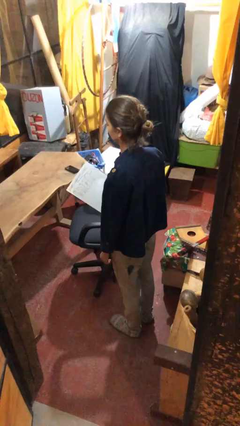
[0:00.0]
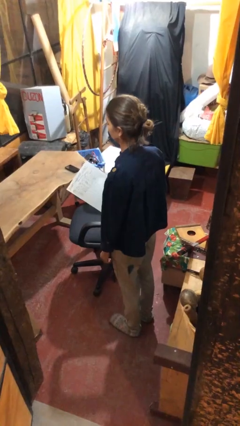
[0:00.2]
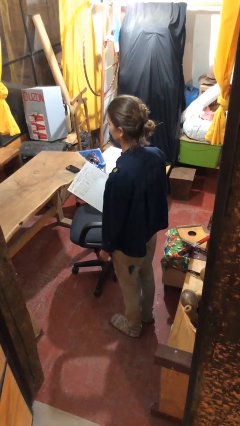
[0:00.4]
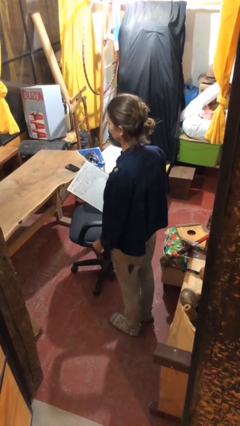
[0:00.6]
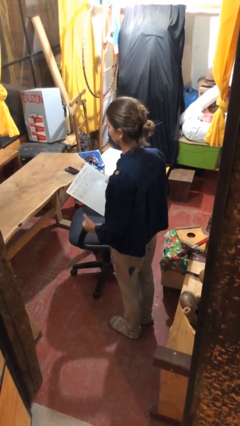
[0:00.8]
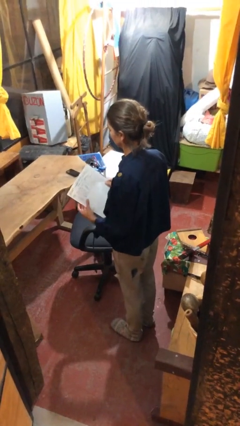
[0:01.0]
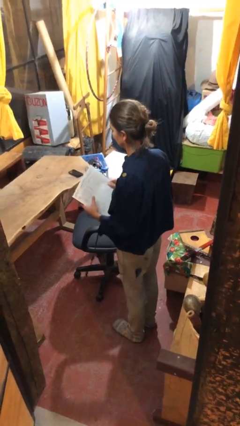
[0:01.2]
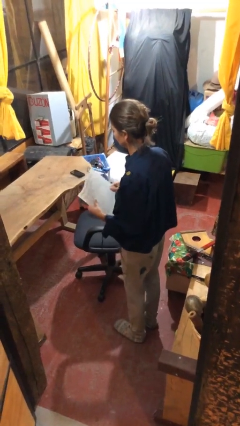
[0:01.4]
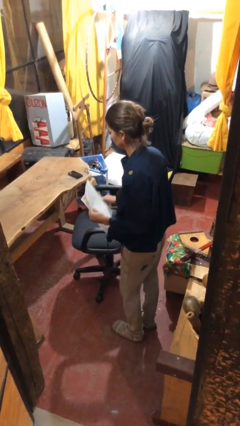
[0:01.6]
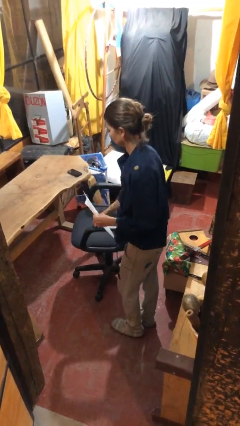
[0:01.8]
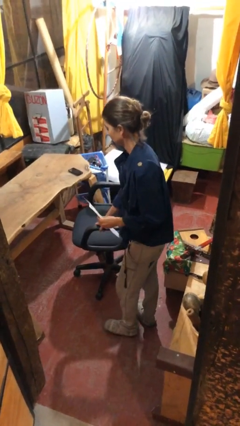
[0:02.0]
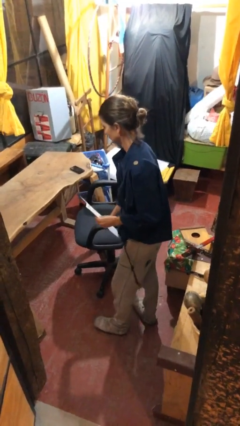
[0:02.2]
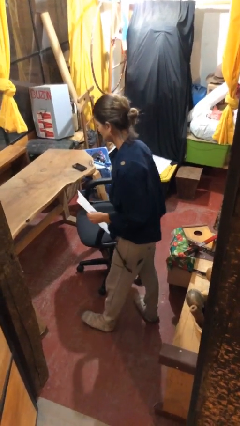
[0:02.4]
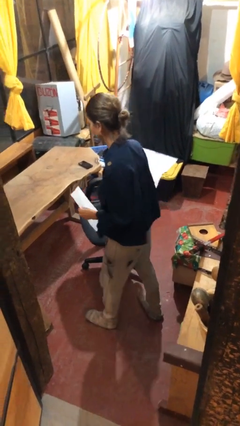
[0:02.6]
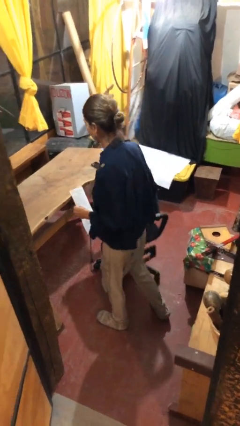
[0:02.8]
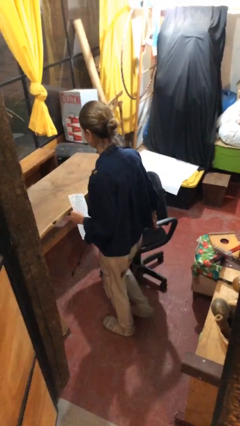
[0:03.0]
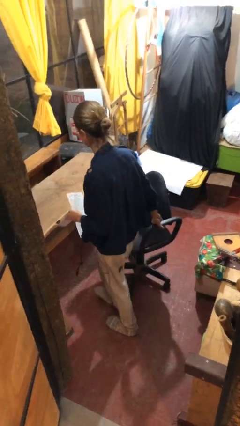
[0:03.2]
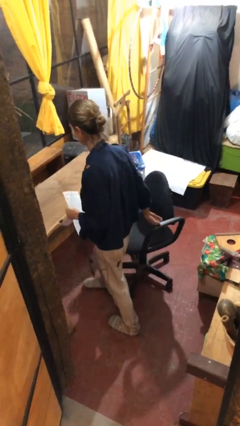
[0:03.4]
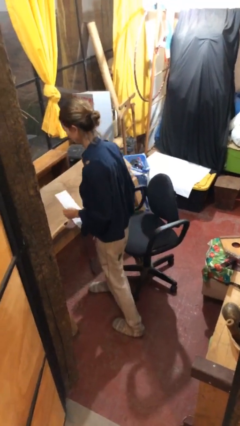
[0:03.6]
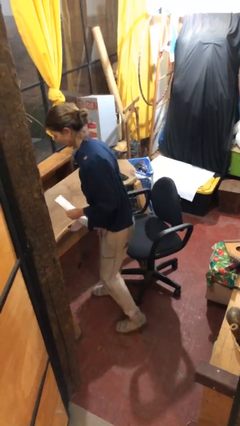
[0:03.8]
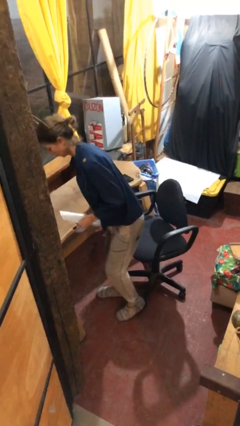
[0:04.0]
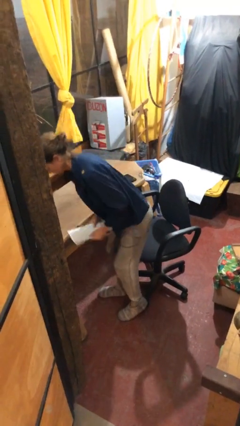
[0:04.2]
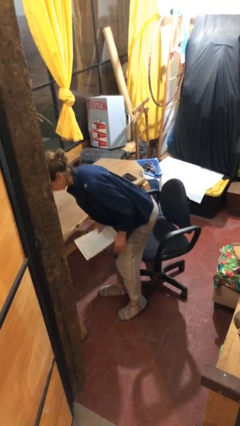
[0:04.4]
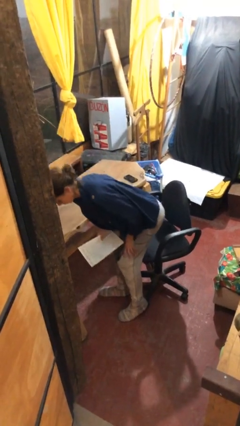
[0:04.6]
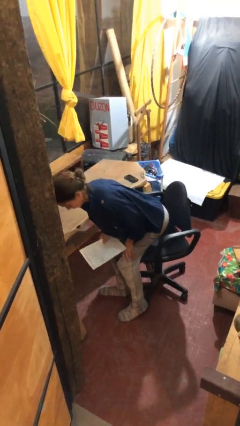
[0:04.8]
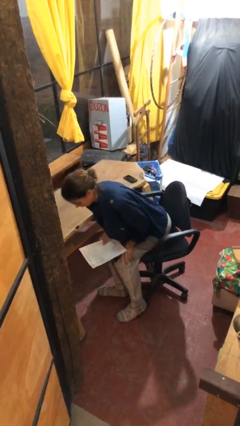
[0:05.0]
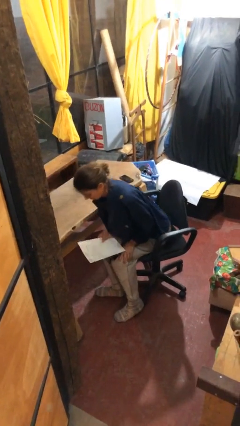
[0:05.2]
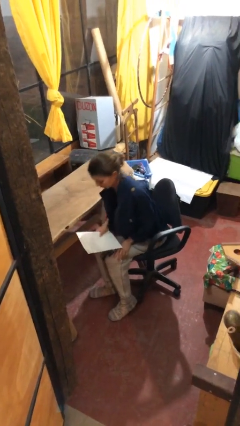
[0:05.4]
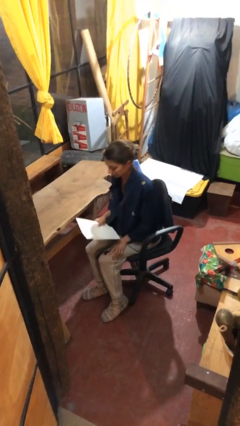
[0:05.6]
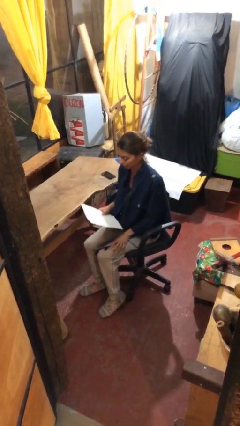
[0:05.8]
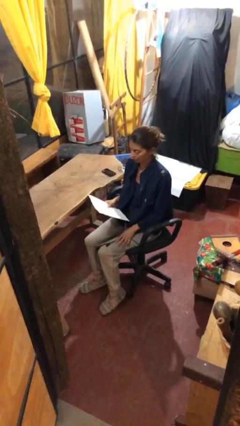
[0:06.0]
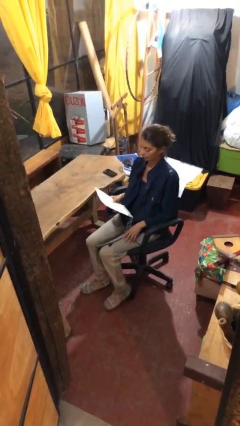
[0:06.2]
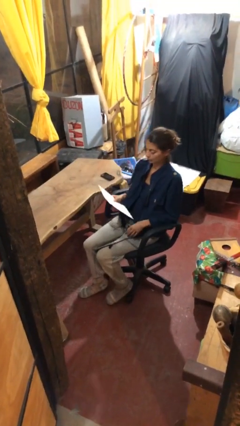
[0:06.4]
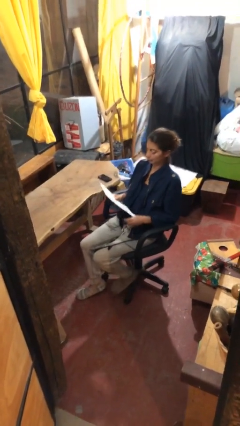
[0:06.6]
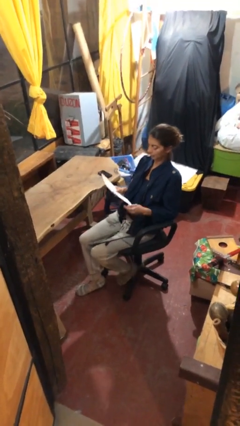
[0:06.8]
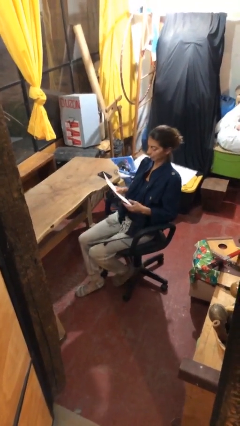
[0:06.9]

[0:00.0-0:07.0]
person sits down

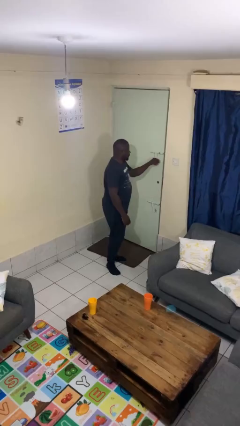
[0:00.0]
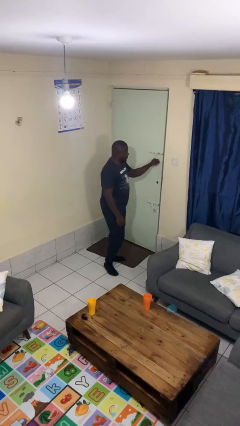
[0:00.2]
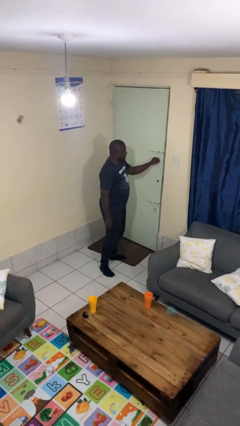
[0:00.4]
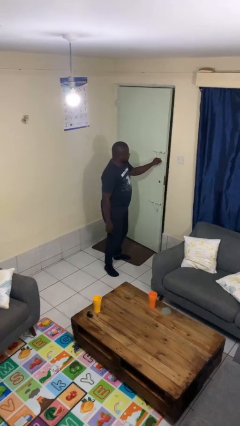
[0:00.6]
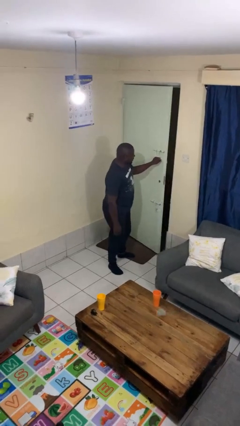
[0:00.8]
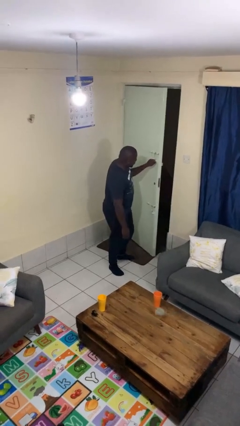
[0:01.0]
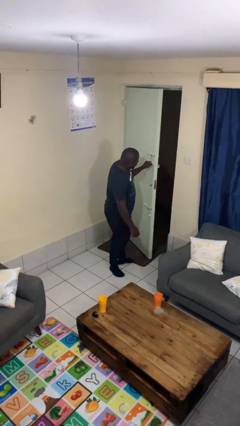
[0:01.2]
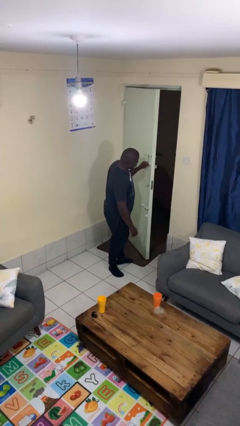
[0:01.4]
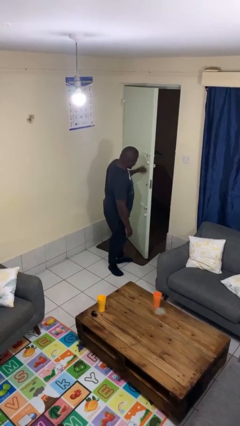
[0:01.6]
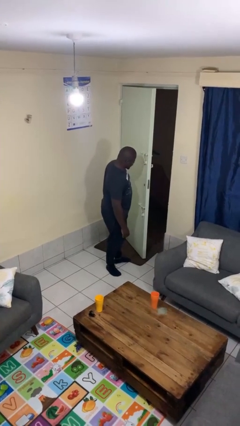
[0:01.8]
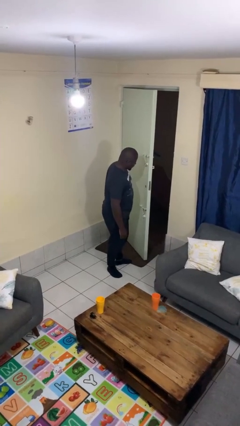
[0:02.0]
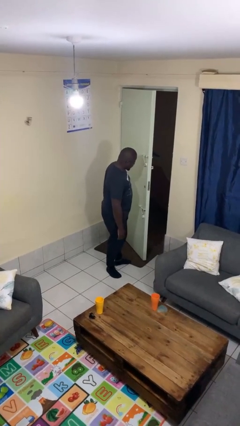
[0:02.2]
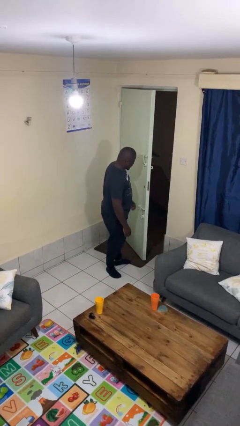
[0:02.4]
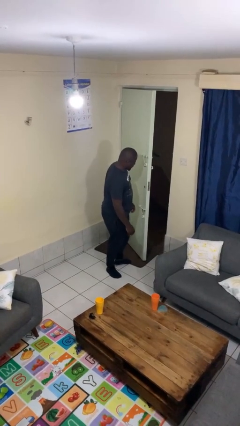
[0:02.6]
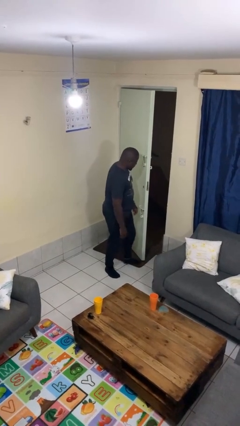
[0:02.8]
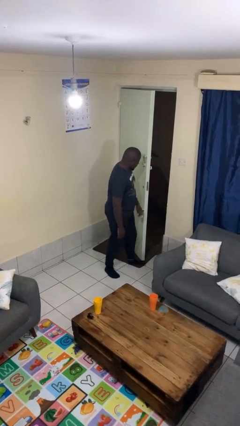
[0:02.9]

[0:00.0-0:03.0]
person opens facility door

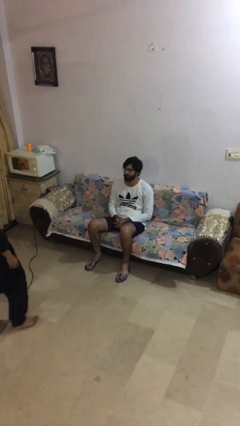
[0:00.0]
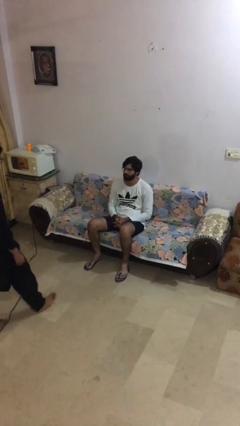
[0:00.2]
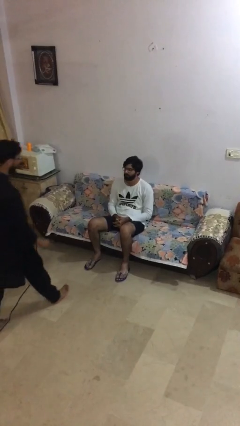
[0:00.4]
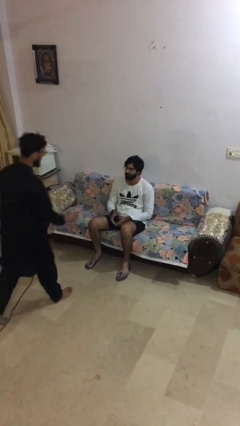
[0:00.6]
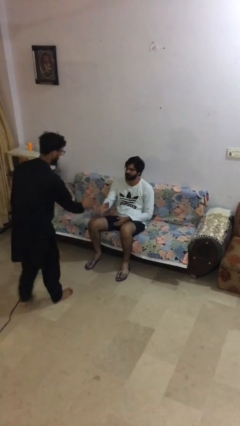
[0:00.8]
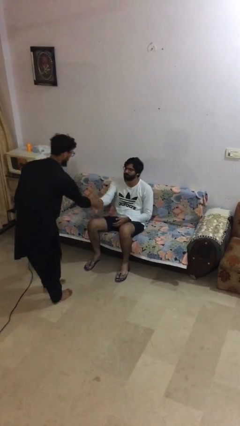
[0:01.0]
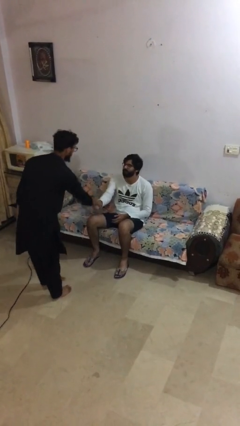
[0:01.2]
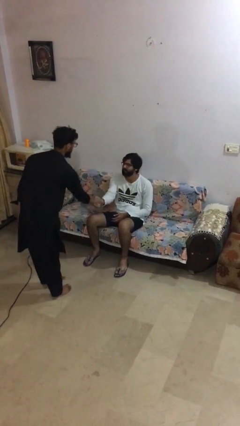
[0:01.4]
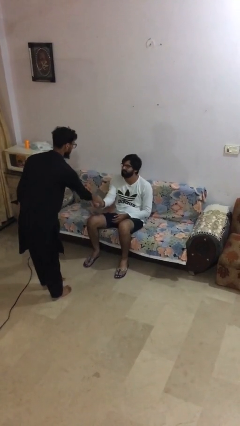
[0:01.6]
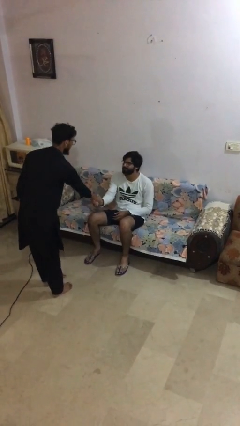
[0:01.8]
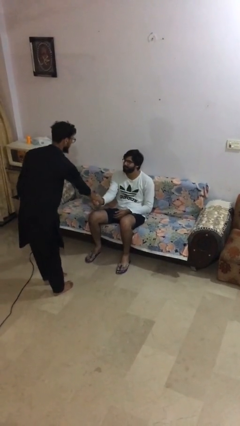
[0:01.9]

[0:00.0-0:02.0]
person shakes hand

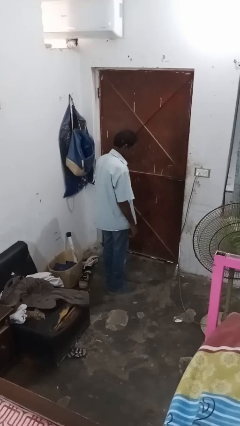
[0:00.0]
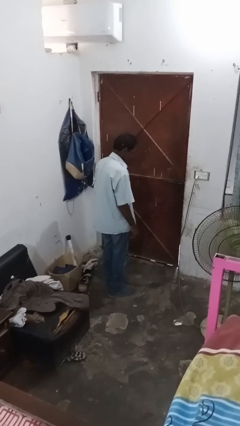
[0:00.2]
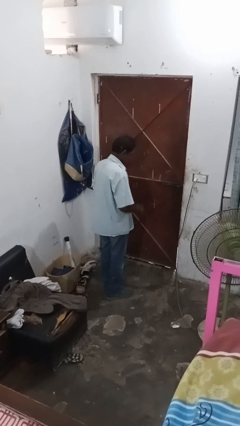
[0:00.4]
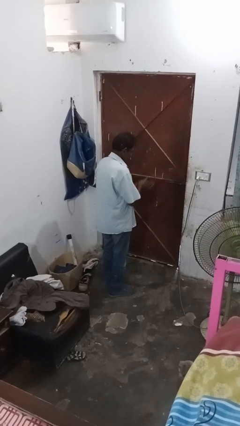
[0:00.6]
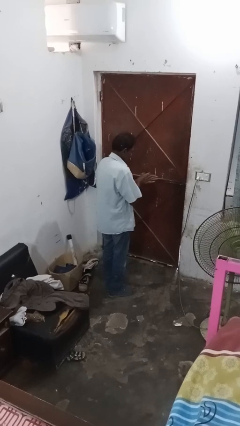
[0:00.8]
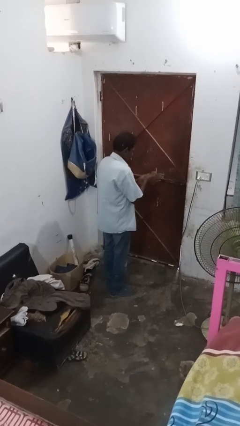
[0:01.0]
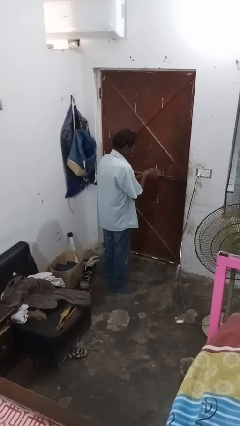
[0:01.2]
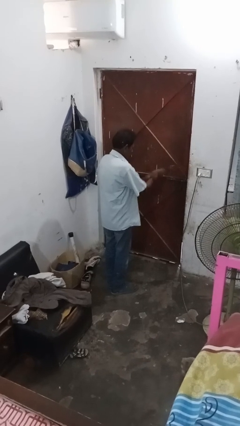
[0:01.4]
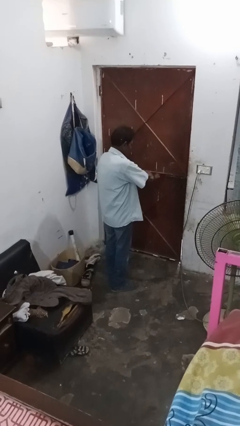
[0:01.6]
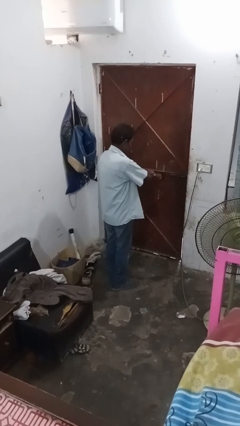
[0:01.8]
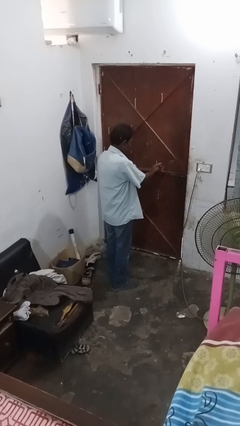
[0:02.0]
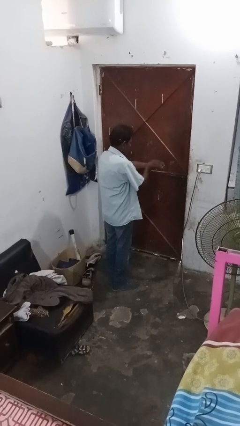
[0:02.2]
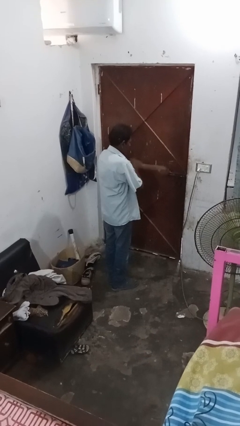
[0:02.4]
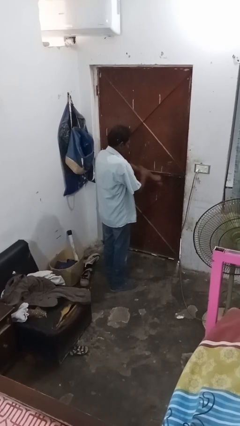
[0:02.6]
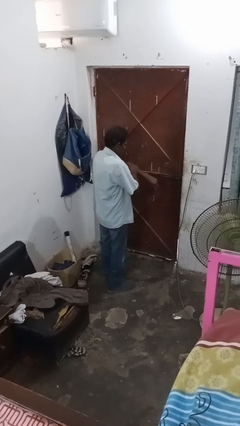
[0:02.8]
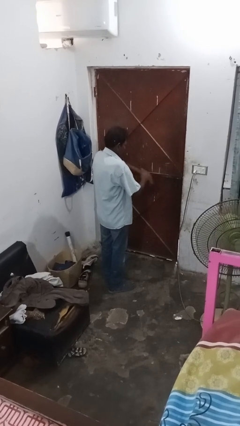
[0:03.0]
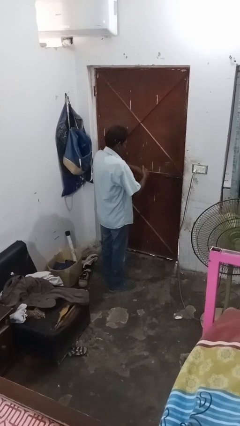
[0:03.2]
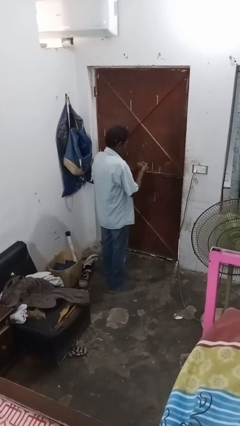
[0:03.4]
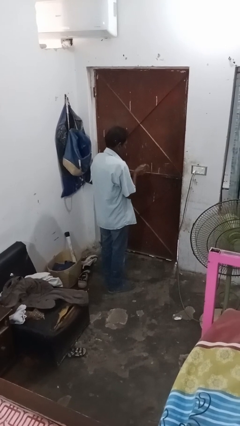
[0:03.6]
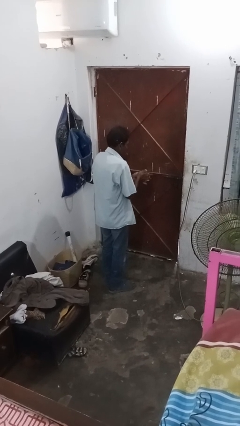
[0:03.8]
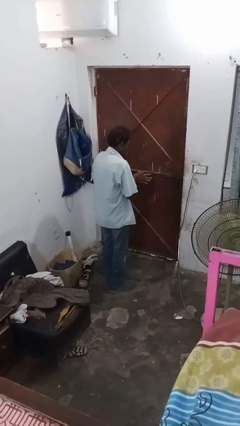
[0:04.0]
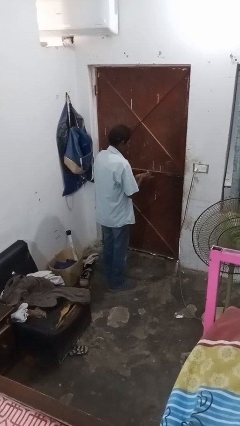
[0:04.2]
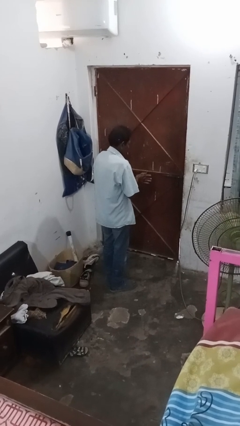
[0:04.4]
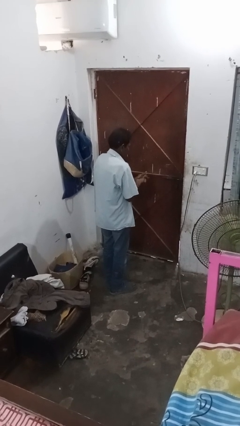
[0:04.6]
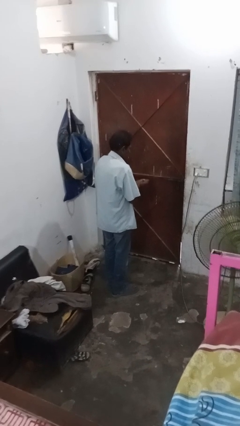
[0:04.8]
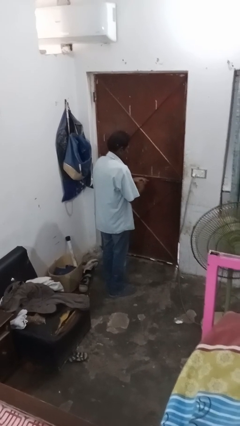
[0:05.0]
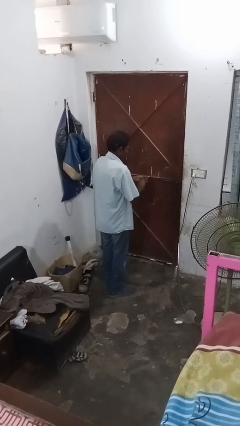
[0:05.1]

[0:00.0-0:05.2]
person applies sunscreen

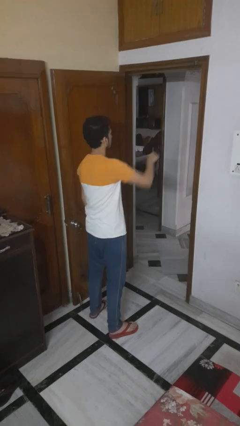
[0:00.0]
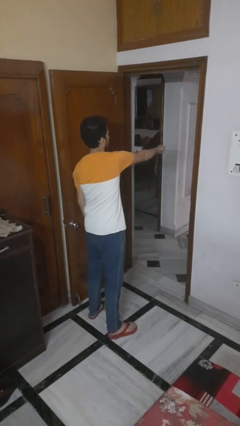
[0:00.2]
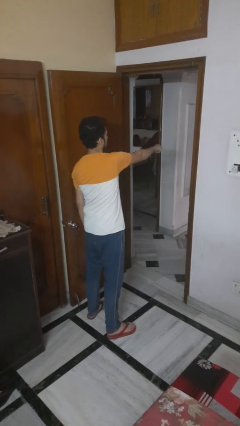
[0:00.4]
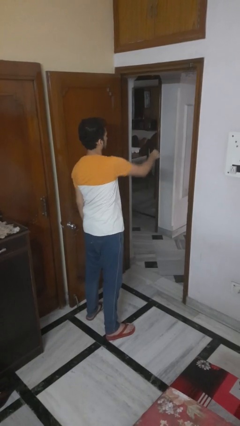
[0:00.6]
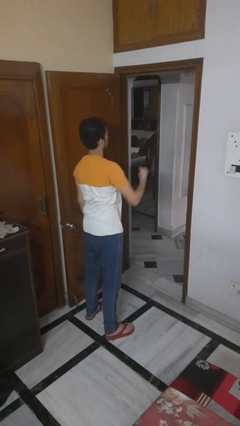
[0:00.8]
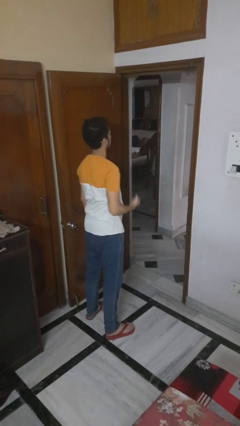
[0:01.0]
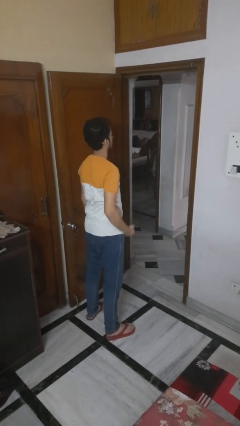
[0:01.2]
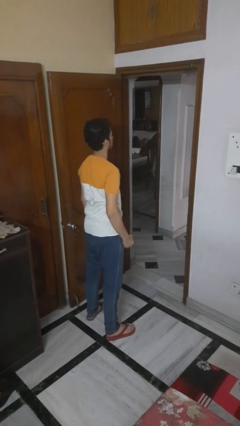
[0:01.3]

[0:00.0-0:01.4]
person punches
